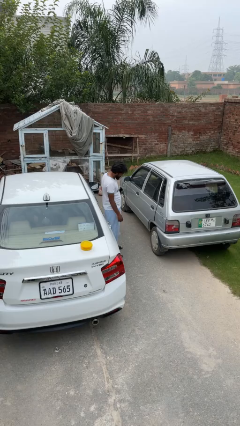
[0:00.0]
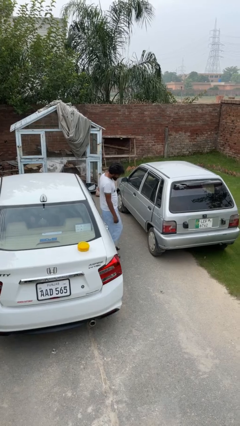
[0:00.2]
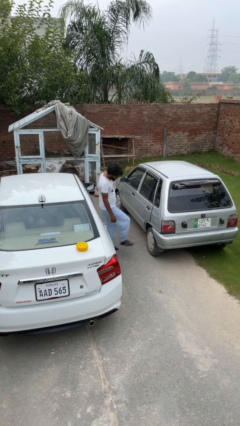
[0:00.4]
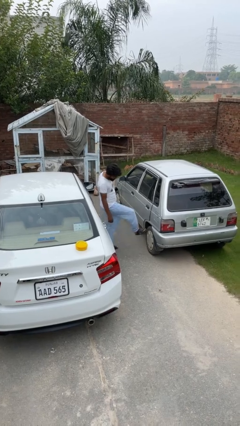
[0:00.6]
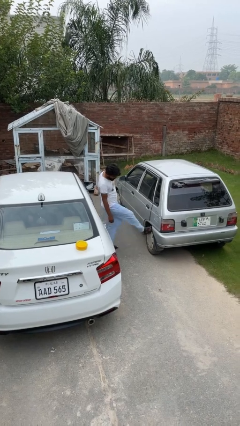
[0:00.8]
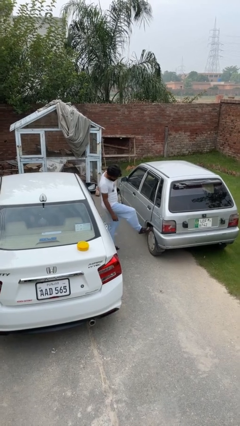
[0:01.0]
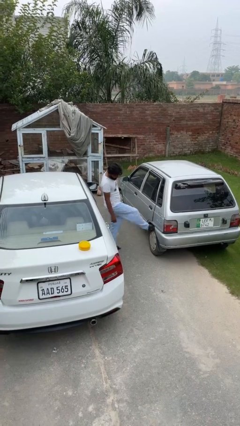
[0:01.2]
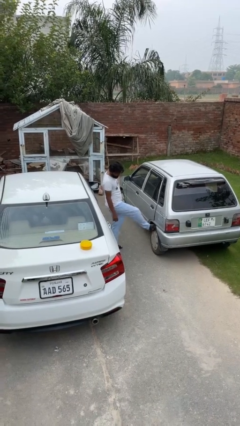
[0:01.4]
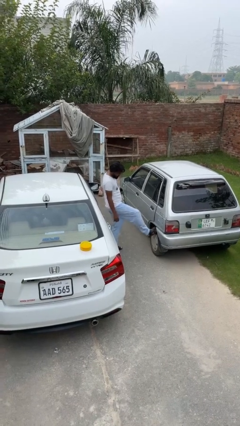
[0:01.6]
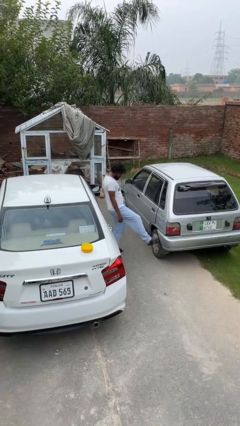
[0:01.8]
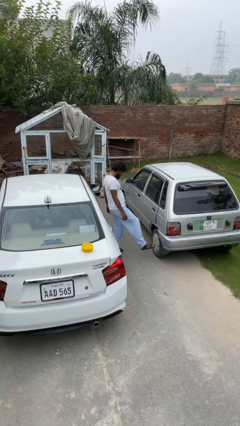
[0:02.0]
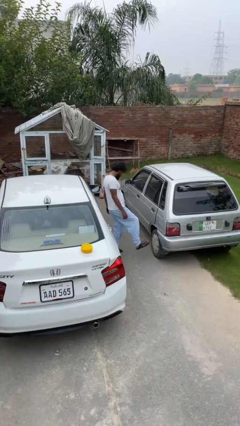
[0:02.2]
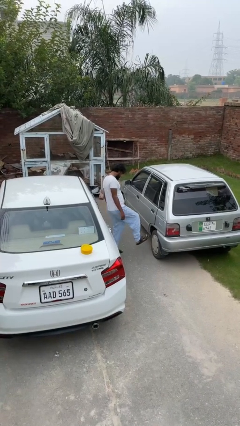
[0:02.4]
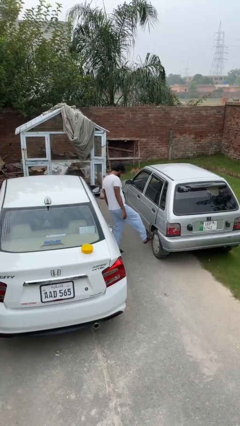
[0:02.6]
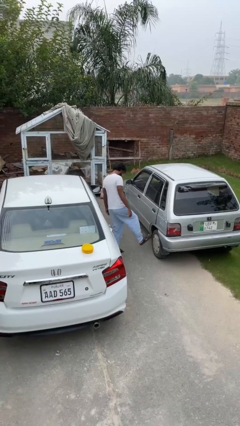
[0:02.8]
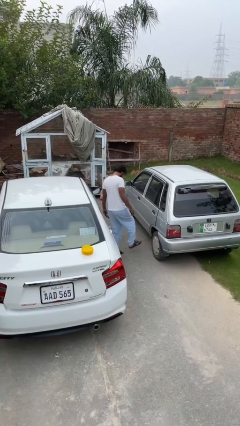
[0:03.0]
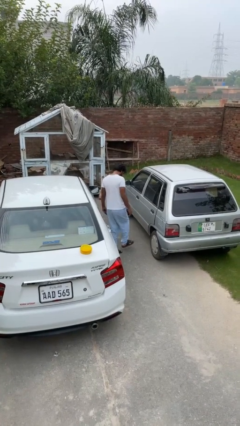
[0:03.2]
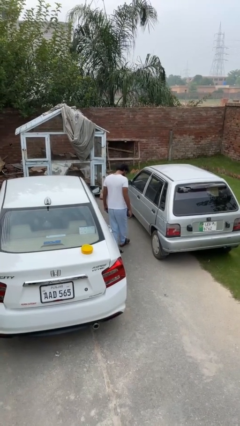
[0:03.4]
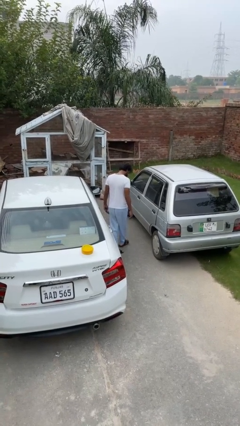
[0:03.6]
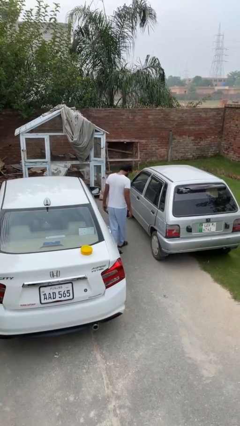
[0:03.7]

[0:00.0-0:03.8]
person kicks car tires

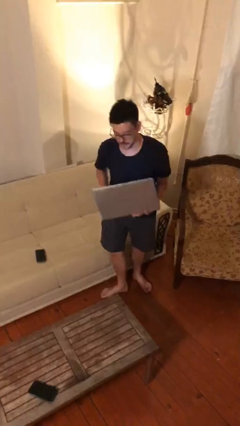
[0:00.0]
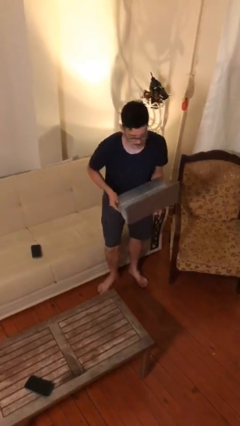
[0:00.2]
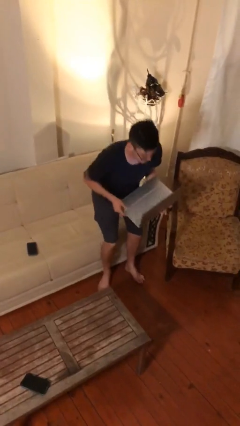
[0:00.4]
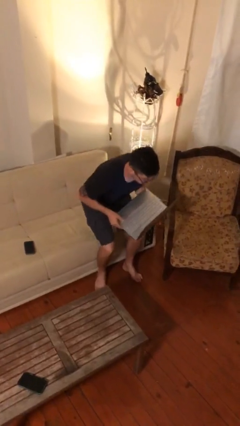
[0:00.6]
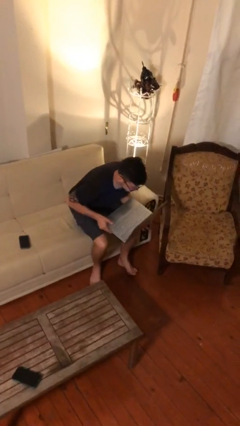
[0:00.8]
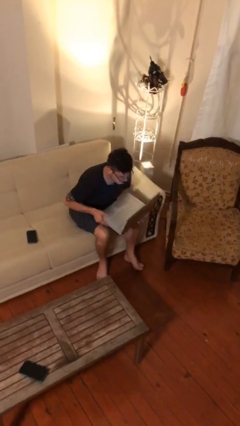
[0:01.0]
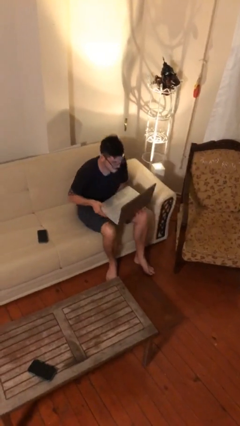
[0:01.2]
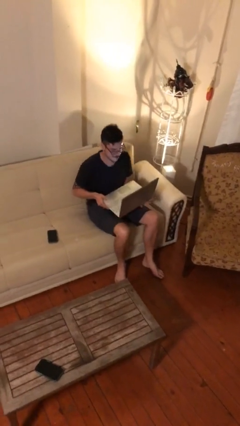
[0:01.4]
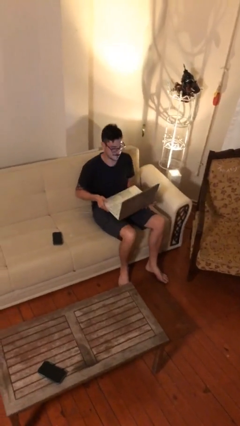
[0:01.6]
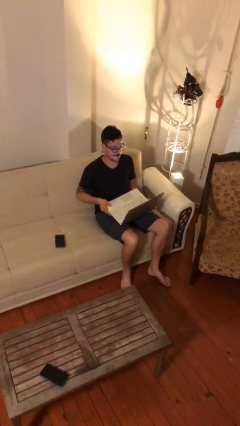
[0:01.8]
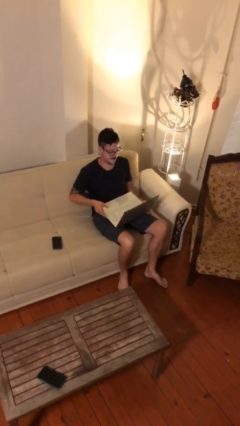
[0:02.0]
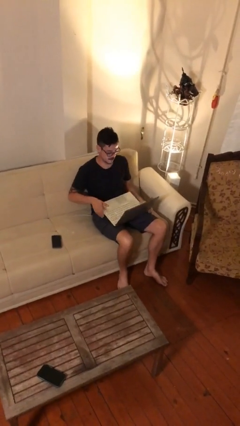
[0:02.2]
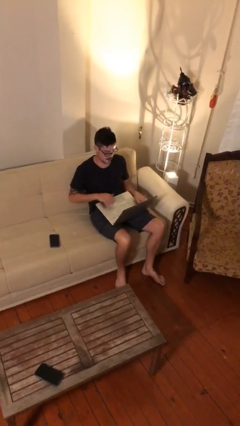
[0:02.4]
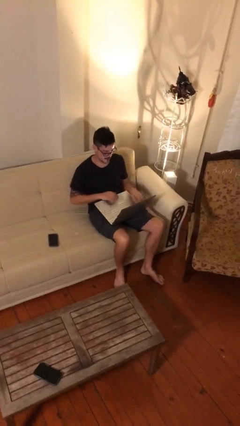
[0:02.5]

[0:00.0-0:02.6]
person sits down

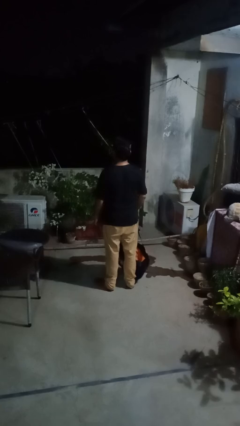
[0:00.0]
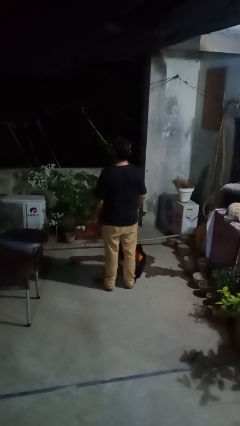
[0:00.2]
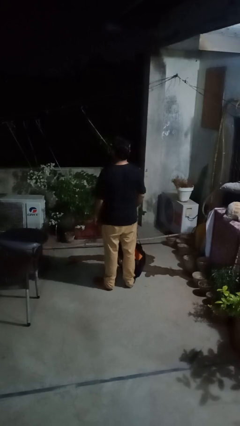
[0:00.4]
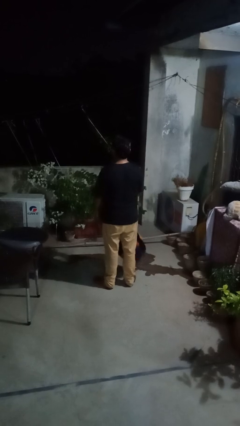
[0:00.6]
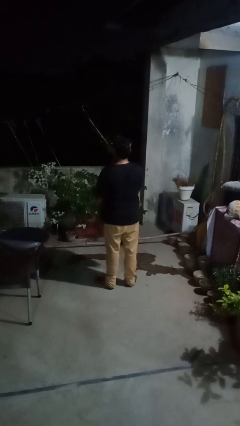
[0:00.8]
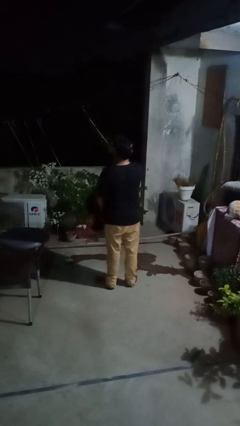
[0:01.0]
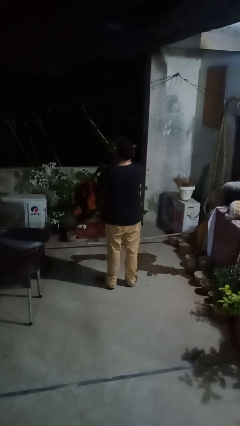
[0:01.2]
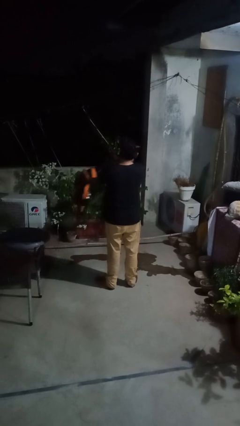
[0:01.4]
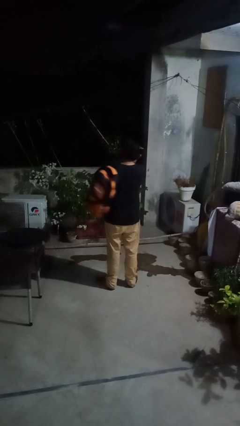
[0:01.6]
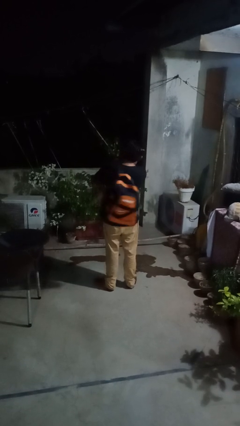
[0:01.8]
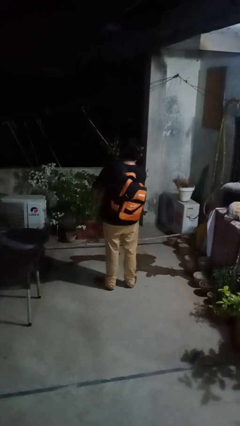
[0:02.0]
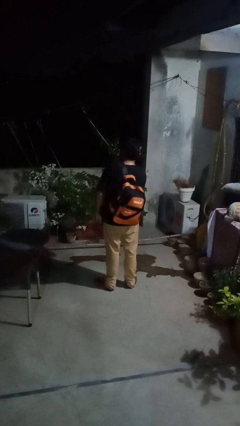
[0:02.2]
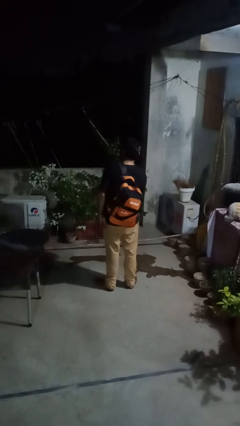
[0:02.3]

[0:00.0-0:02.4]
person puts on backpack

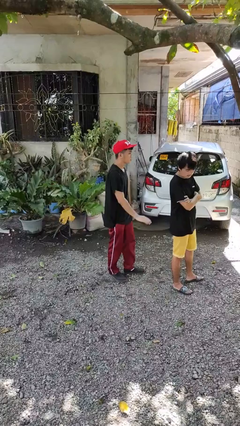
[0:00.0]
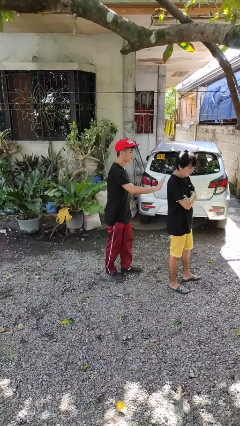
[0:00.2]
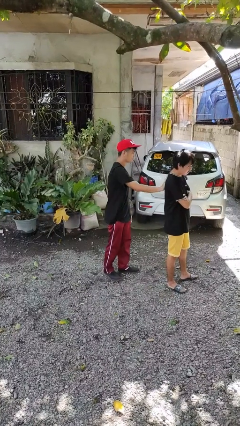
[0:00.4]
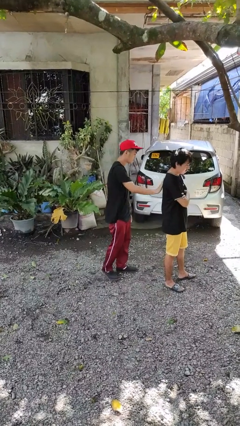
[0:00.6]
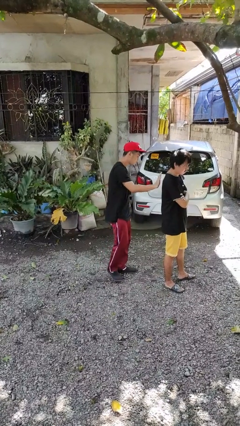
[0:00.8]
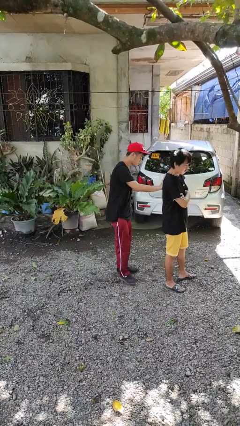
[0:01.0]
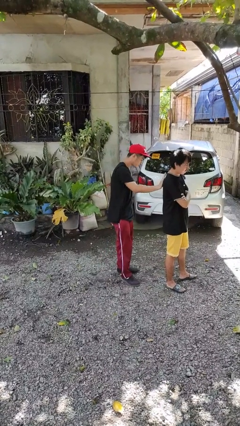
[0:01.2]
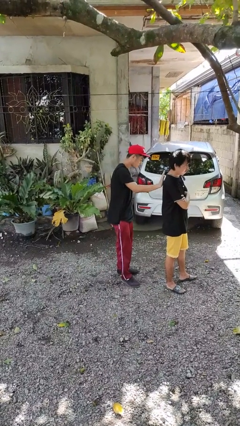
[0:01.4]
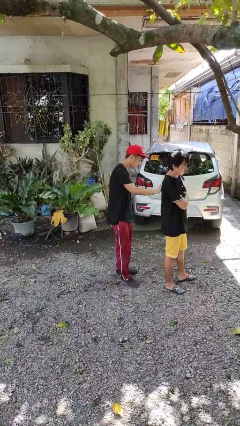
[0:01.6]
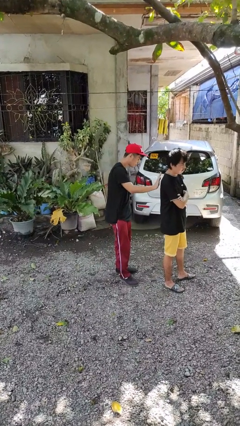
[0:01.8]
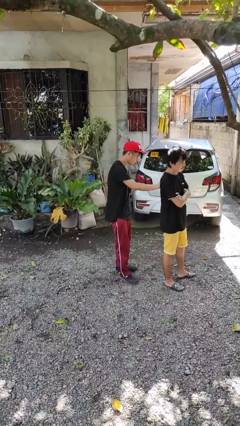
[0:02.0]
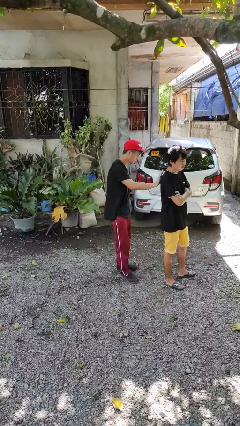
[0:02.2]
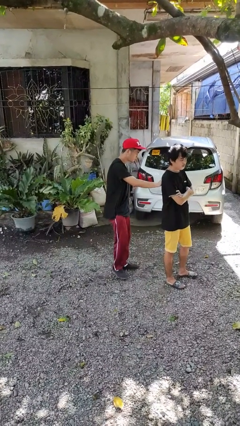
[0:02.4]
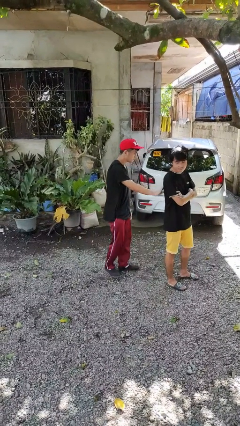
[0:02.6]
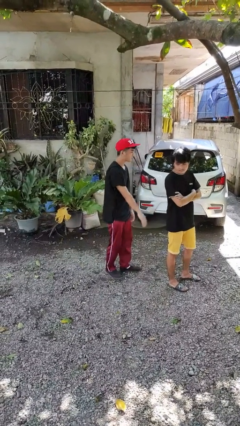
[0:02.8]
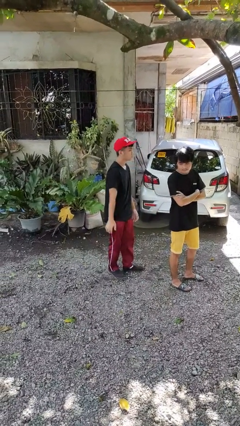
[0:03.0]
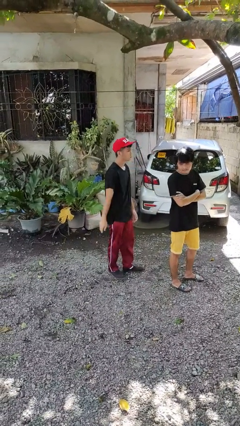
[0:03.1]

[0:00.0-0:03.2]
person touches back of person

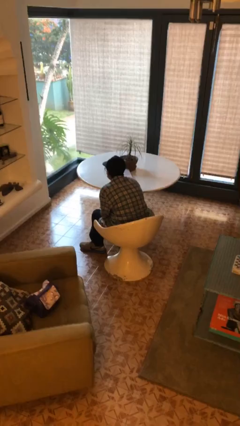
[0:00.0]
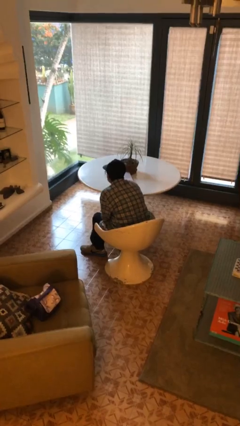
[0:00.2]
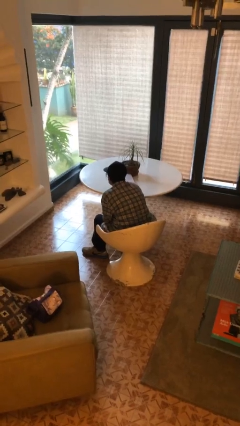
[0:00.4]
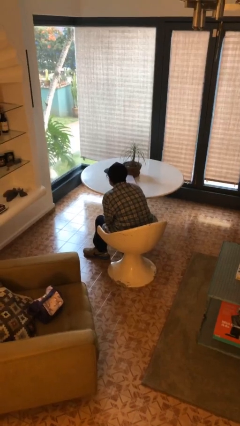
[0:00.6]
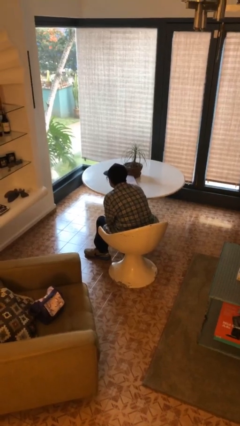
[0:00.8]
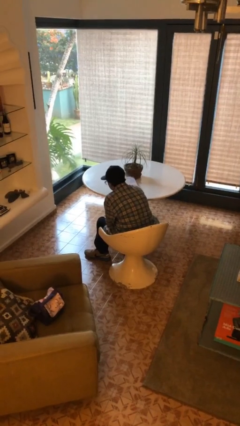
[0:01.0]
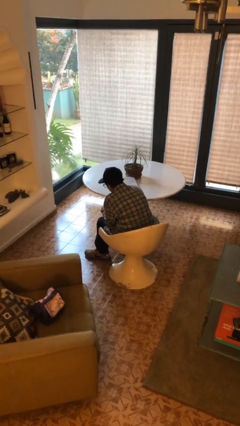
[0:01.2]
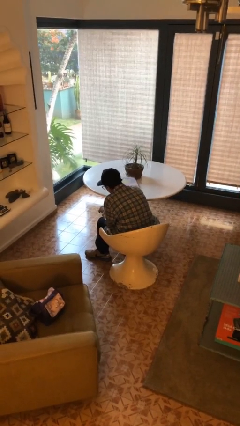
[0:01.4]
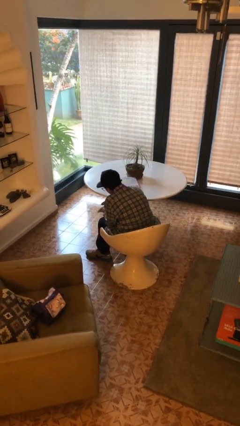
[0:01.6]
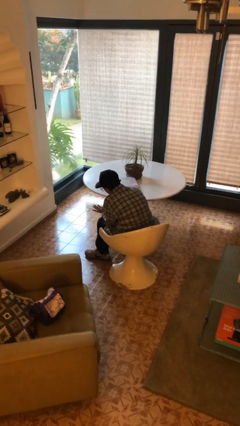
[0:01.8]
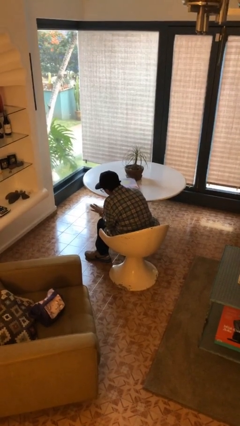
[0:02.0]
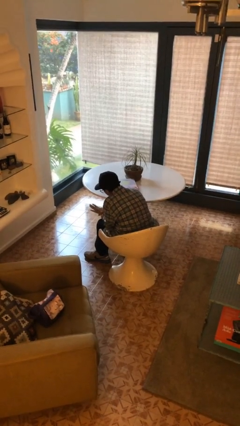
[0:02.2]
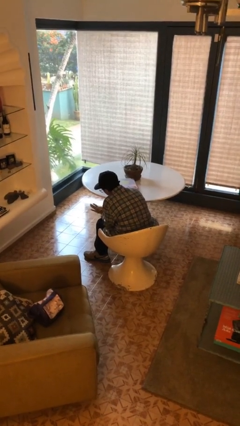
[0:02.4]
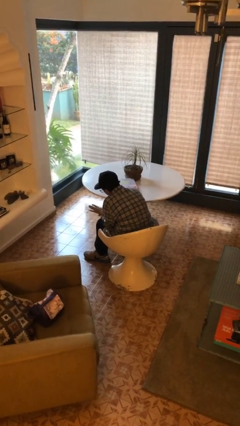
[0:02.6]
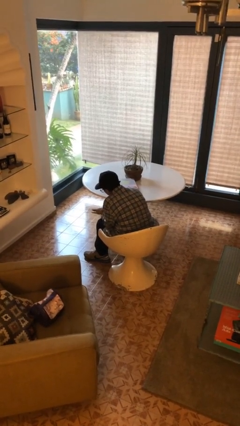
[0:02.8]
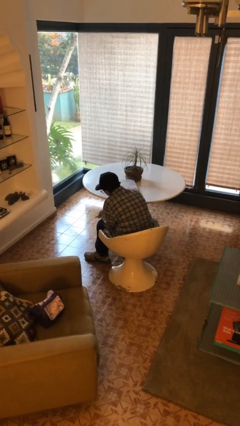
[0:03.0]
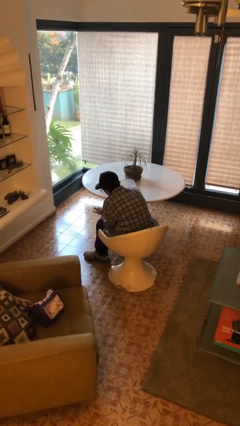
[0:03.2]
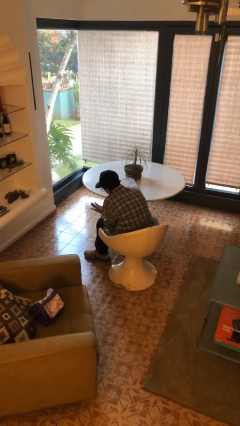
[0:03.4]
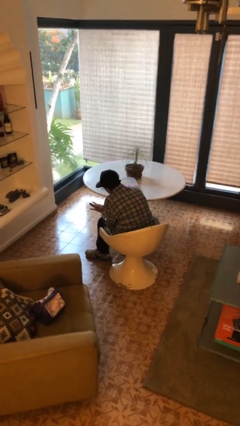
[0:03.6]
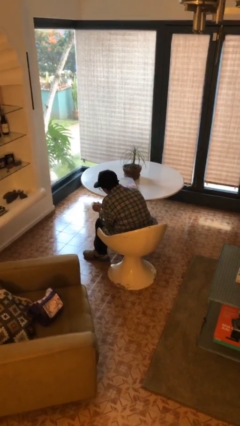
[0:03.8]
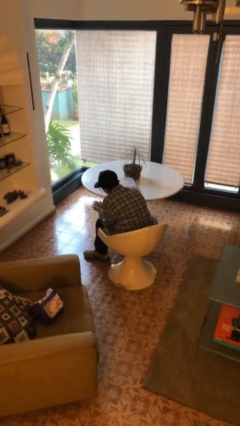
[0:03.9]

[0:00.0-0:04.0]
person looks at hands in lap

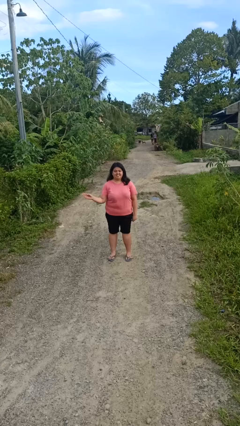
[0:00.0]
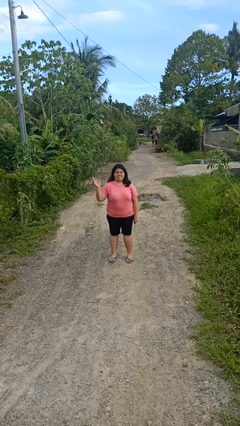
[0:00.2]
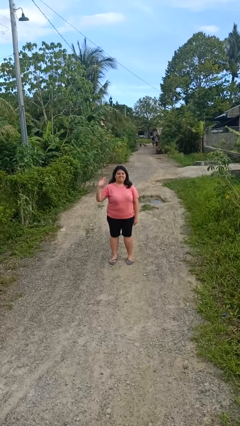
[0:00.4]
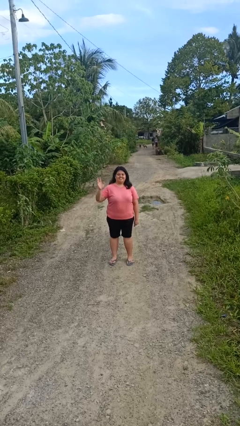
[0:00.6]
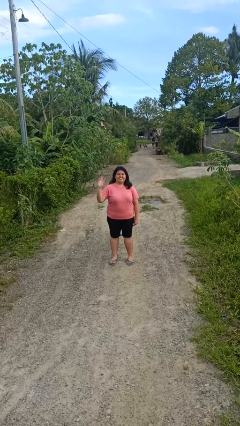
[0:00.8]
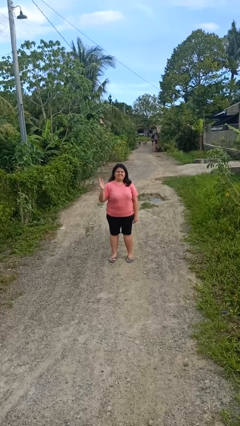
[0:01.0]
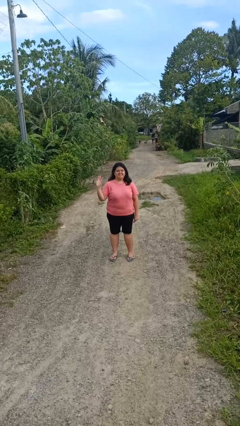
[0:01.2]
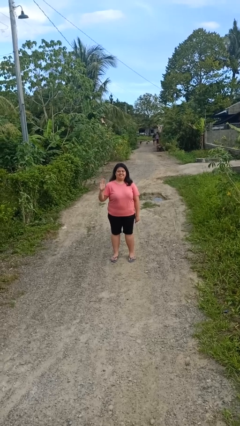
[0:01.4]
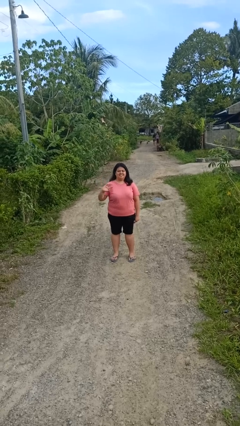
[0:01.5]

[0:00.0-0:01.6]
person waves at person
